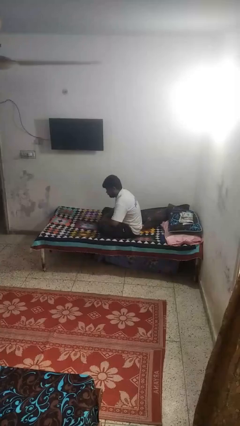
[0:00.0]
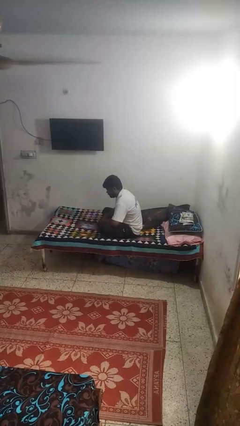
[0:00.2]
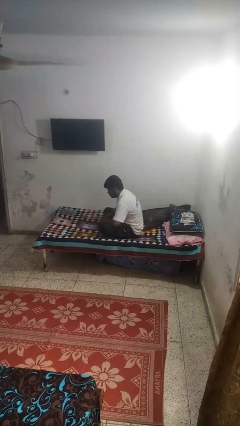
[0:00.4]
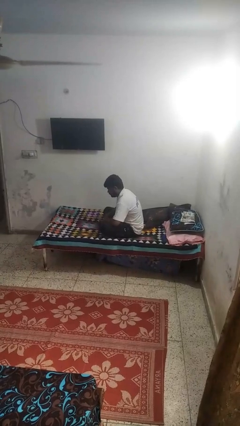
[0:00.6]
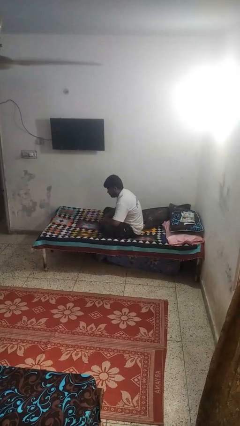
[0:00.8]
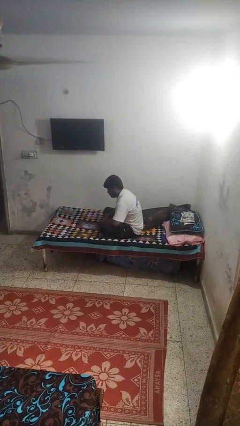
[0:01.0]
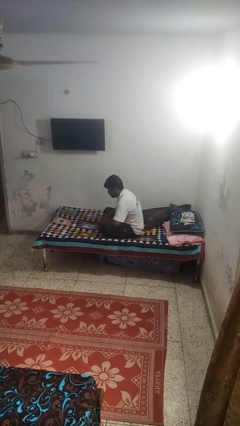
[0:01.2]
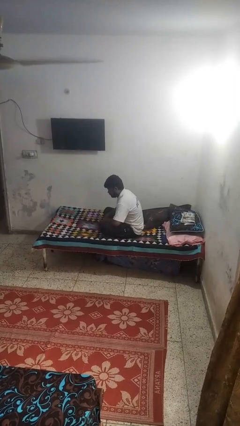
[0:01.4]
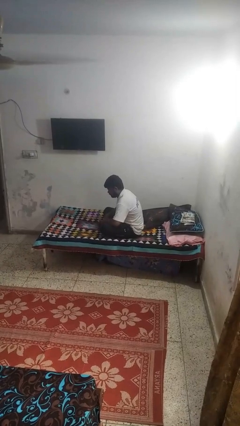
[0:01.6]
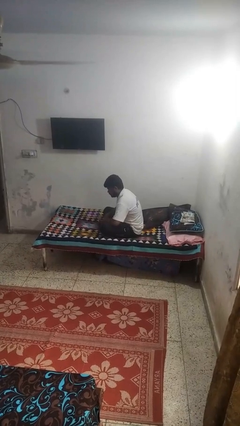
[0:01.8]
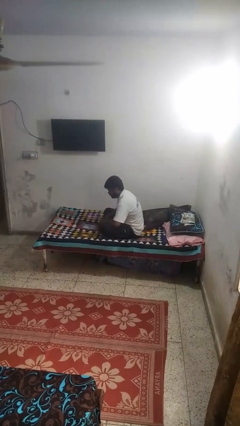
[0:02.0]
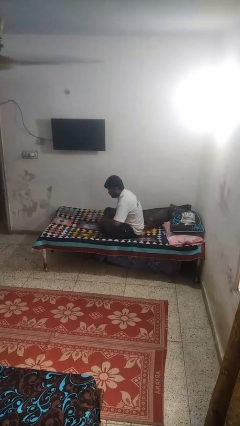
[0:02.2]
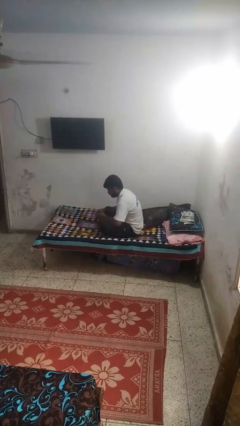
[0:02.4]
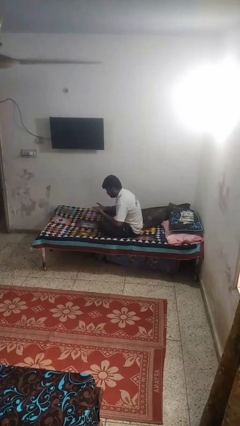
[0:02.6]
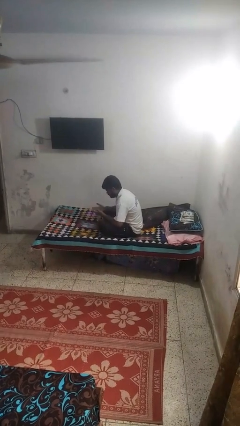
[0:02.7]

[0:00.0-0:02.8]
person looks at hands in lap

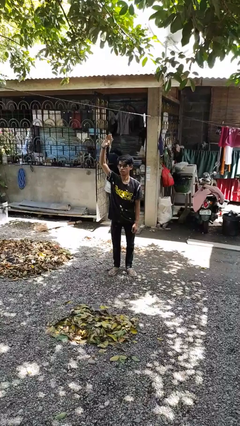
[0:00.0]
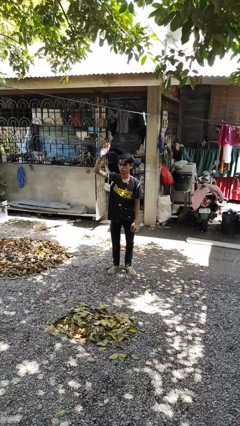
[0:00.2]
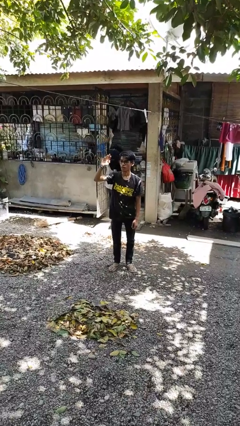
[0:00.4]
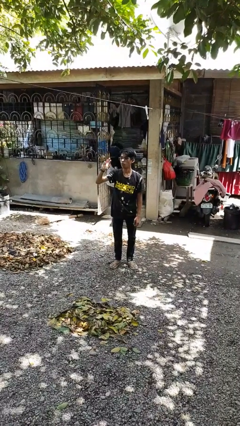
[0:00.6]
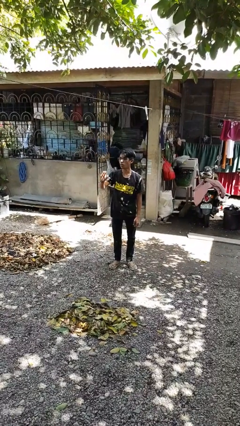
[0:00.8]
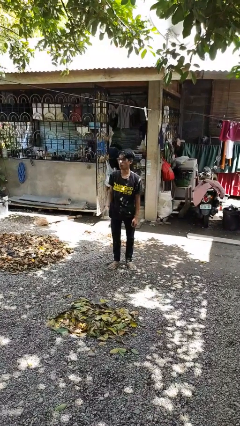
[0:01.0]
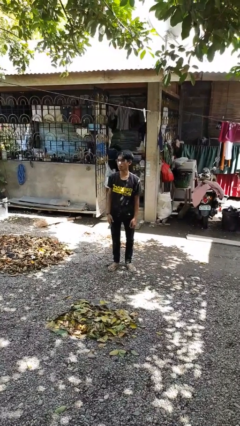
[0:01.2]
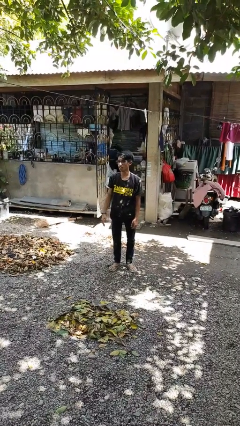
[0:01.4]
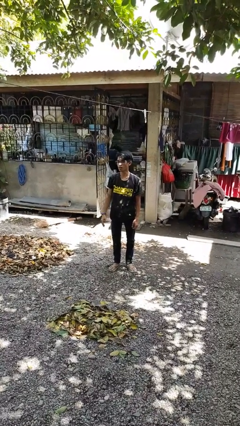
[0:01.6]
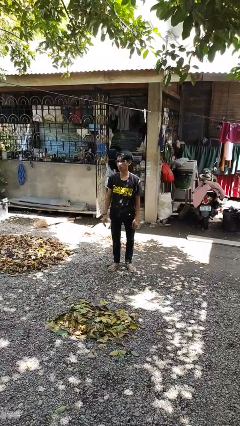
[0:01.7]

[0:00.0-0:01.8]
person gestures lower hand

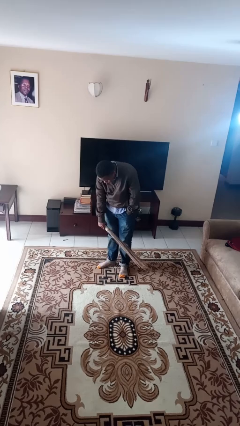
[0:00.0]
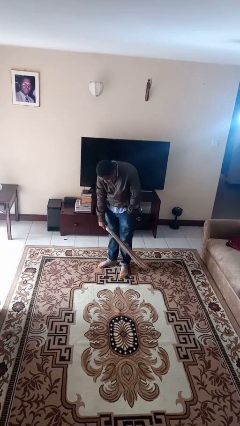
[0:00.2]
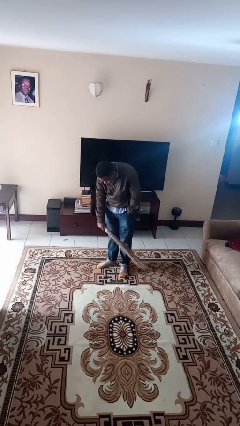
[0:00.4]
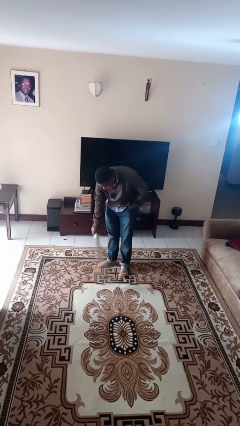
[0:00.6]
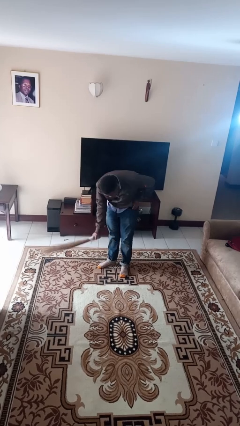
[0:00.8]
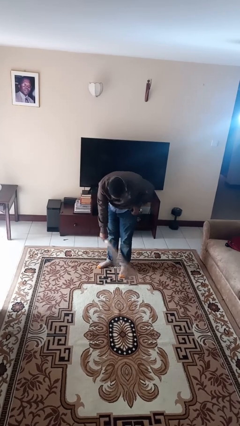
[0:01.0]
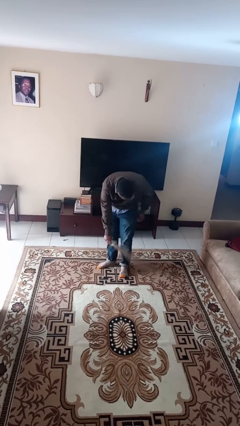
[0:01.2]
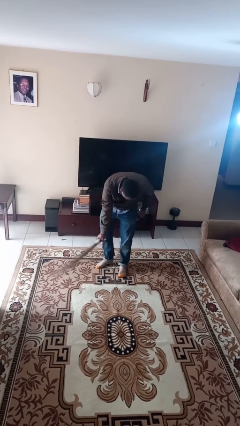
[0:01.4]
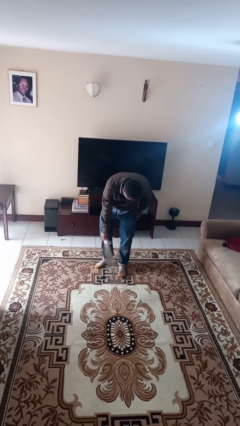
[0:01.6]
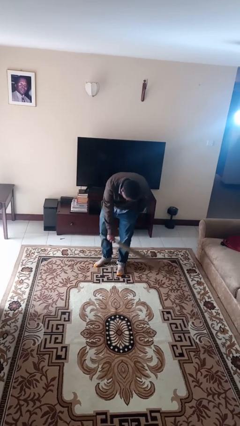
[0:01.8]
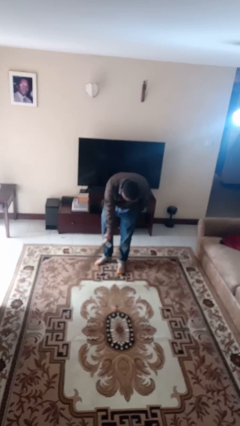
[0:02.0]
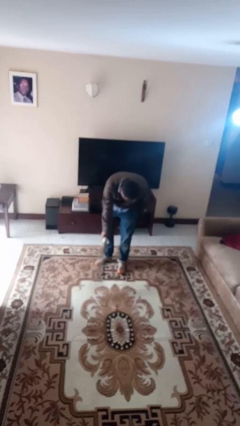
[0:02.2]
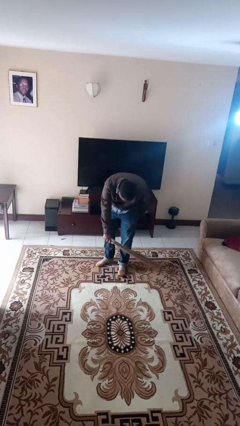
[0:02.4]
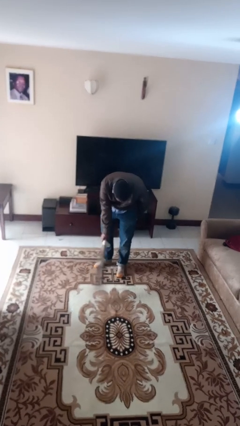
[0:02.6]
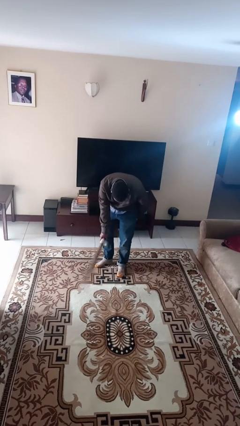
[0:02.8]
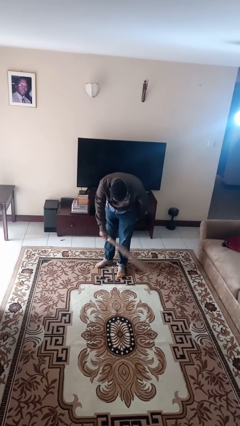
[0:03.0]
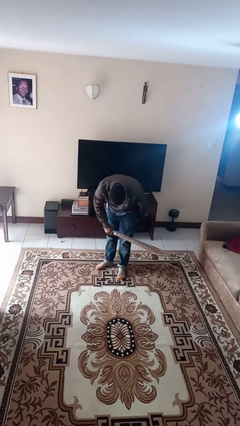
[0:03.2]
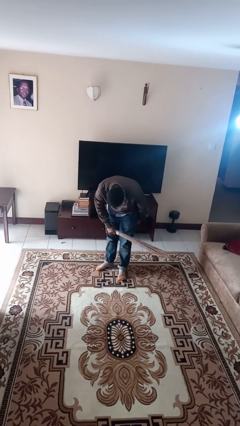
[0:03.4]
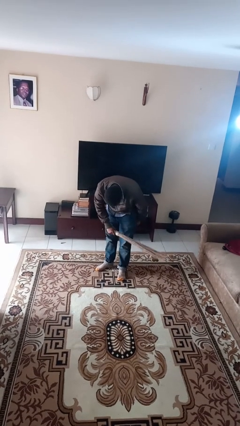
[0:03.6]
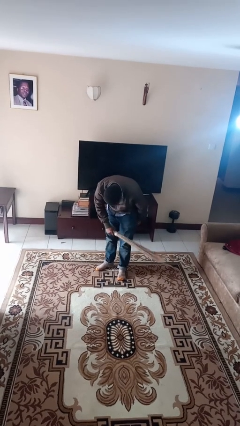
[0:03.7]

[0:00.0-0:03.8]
person sweeps floor

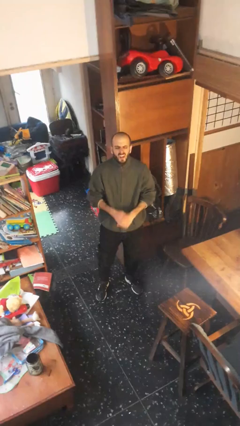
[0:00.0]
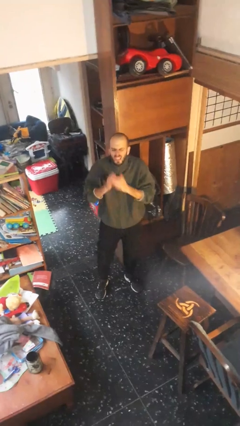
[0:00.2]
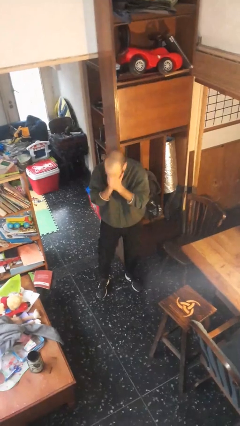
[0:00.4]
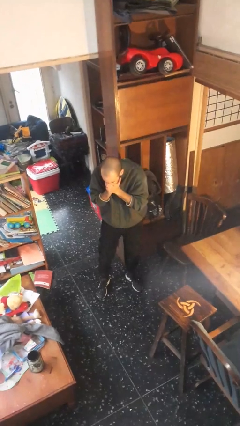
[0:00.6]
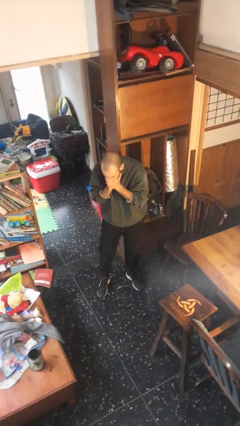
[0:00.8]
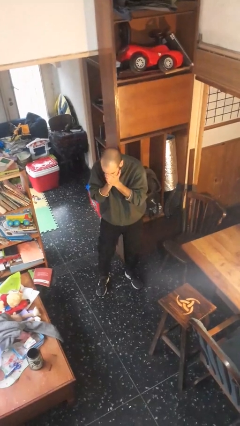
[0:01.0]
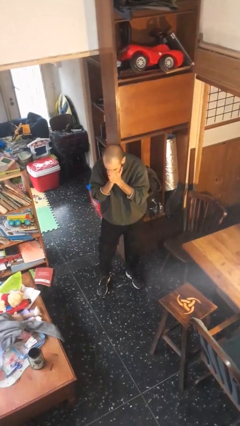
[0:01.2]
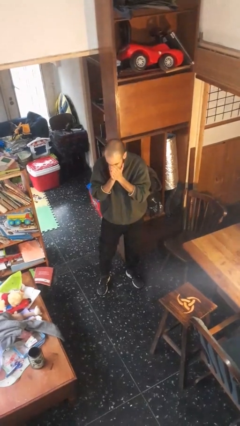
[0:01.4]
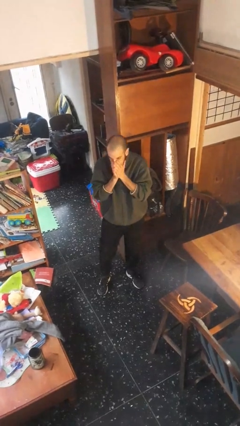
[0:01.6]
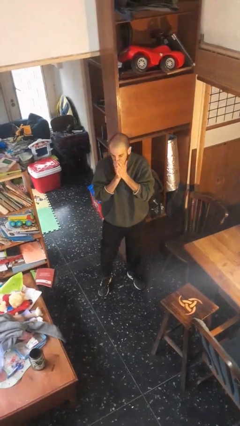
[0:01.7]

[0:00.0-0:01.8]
person sneezes into hand

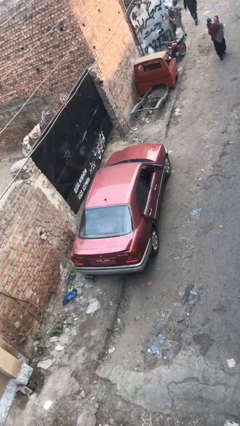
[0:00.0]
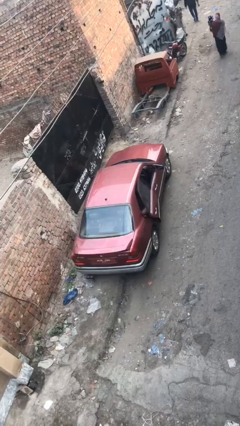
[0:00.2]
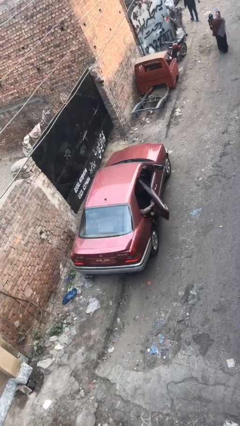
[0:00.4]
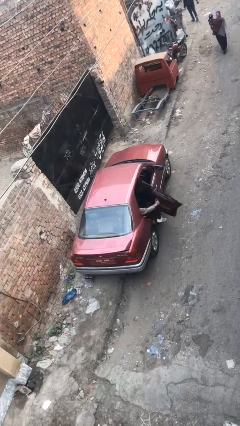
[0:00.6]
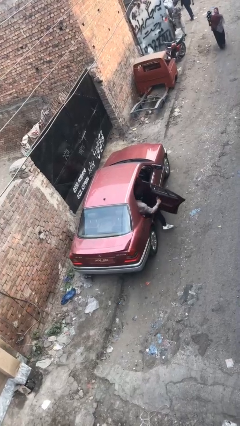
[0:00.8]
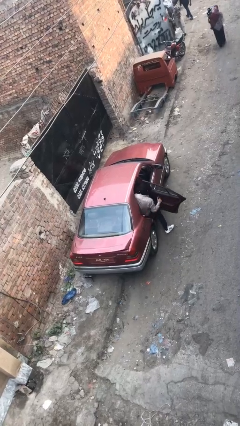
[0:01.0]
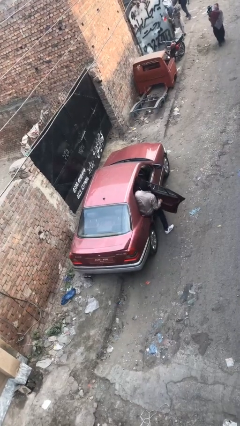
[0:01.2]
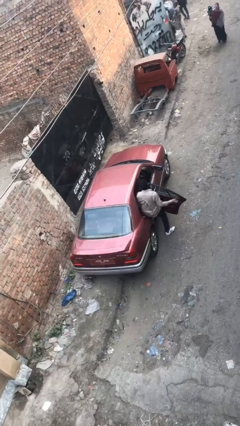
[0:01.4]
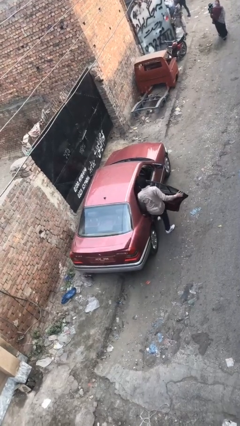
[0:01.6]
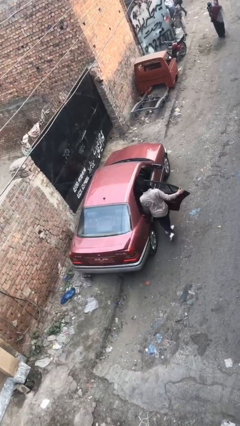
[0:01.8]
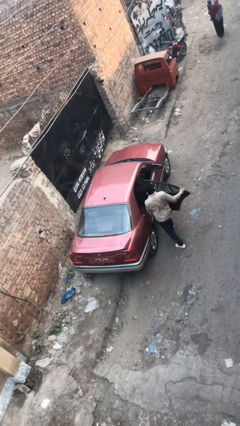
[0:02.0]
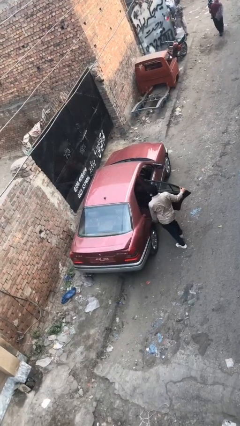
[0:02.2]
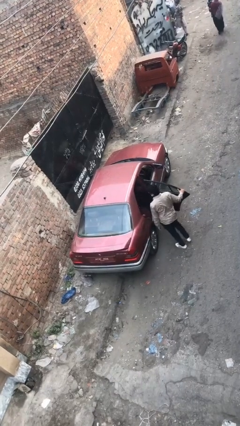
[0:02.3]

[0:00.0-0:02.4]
car drops off person

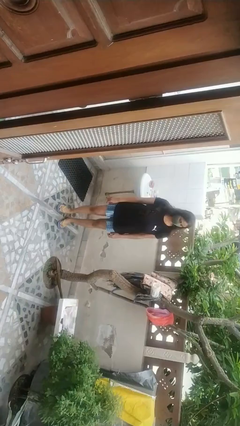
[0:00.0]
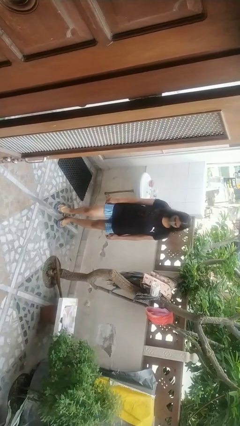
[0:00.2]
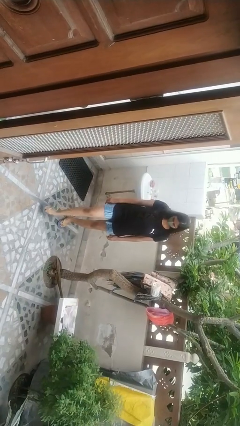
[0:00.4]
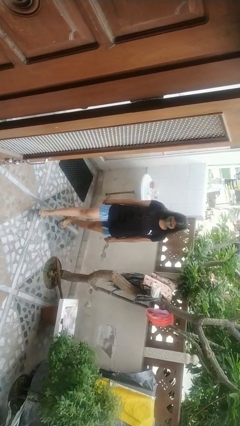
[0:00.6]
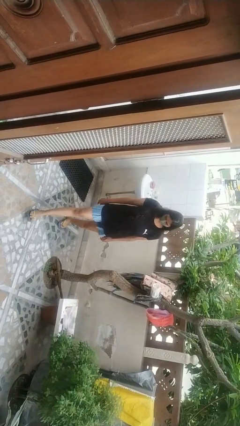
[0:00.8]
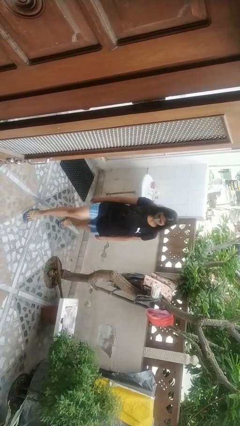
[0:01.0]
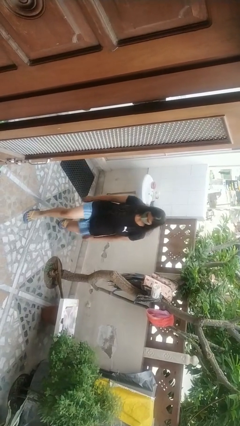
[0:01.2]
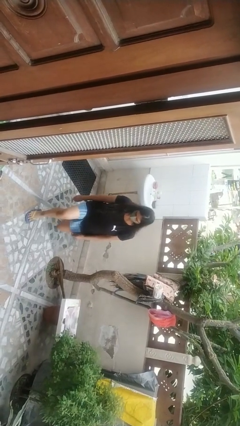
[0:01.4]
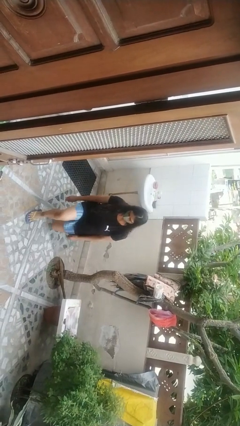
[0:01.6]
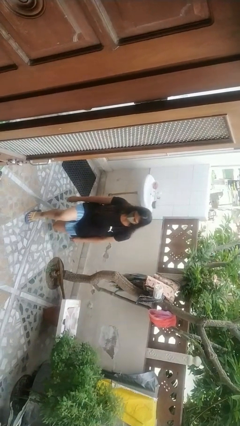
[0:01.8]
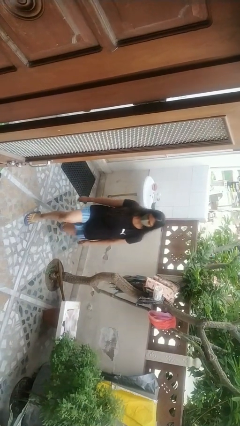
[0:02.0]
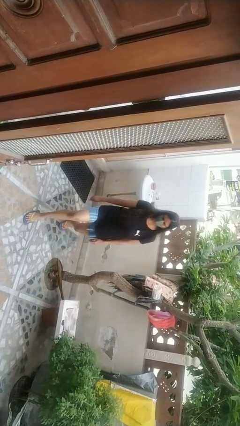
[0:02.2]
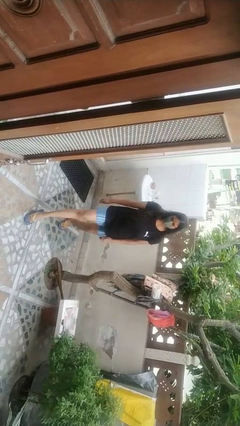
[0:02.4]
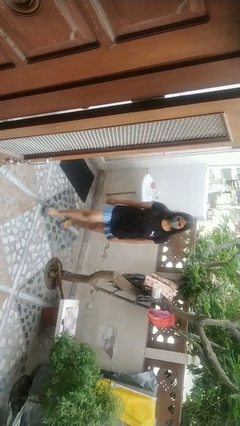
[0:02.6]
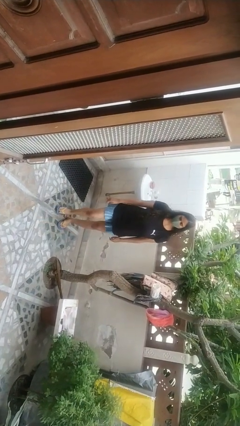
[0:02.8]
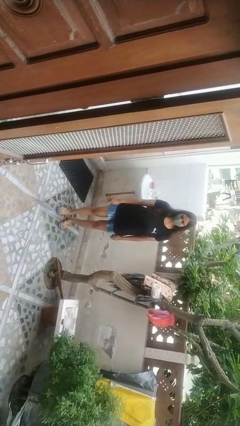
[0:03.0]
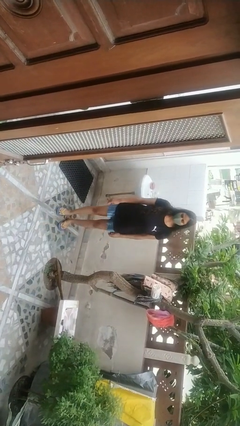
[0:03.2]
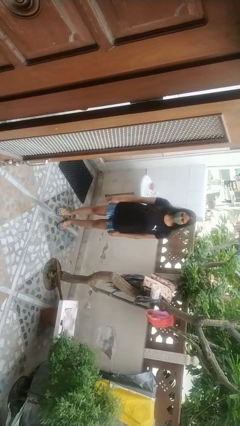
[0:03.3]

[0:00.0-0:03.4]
person exercises with lunges

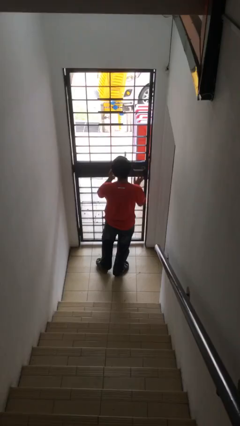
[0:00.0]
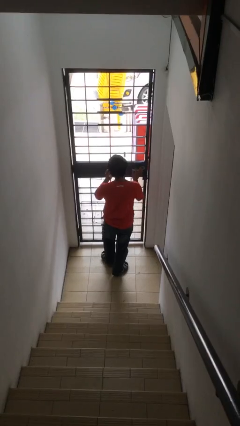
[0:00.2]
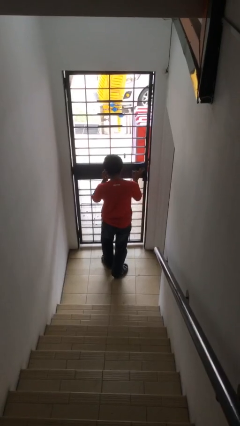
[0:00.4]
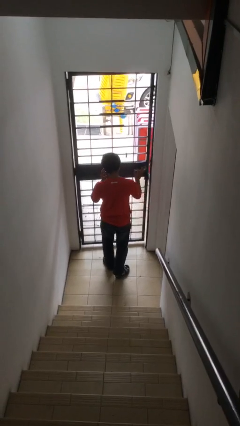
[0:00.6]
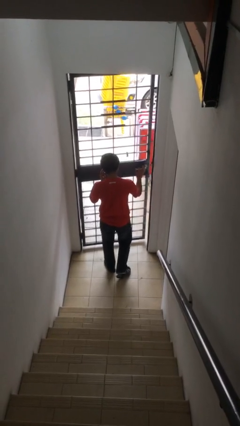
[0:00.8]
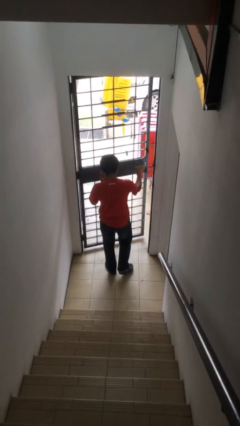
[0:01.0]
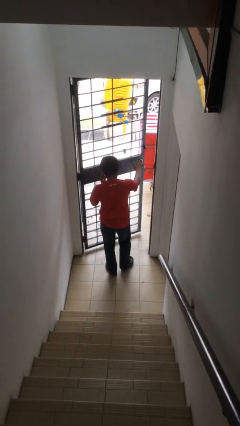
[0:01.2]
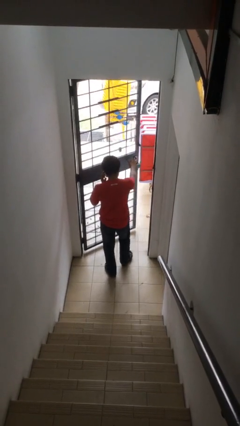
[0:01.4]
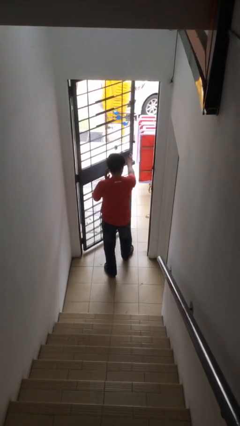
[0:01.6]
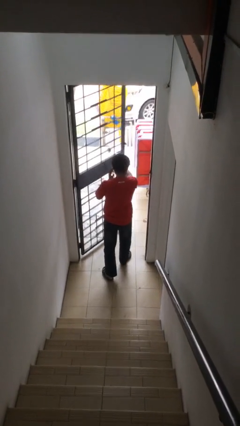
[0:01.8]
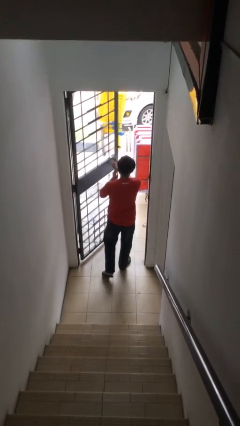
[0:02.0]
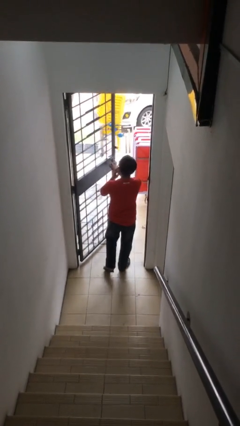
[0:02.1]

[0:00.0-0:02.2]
person opens facility door
